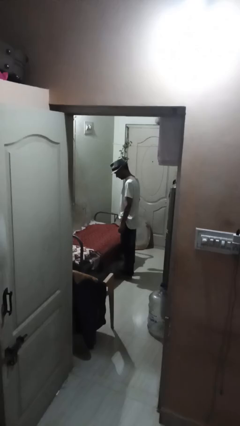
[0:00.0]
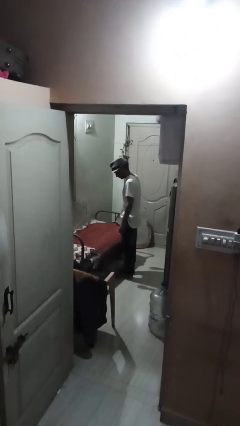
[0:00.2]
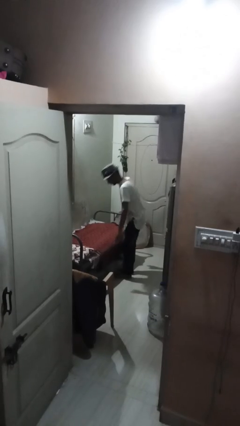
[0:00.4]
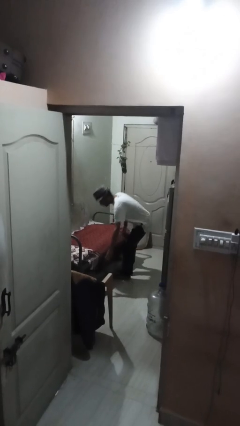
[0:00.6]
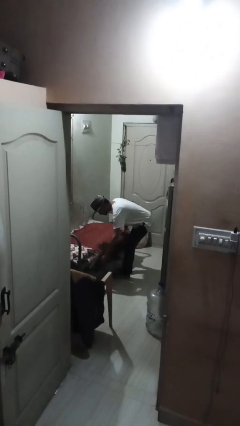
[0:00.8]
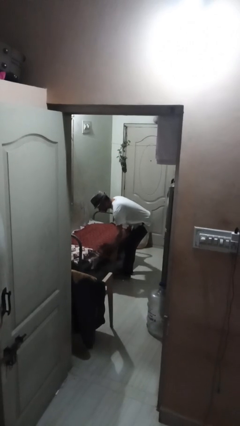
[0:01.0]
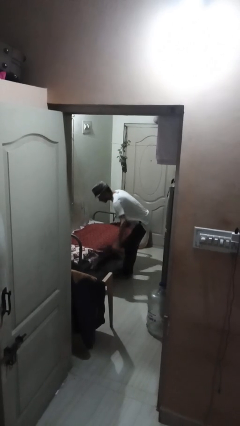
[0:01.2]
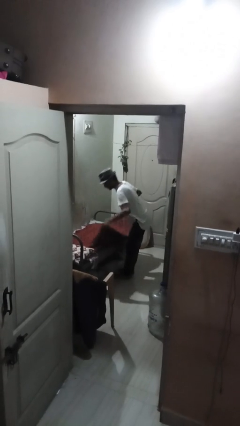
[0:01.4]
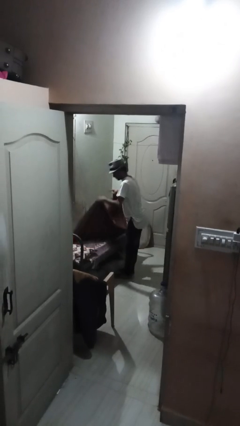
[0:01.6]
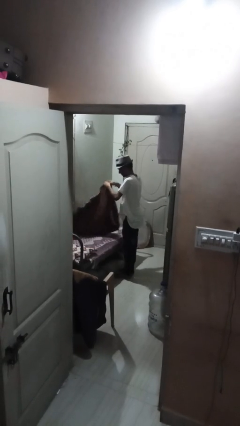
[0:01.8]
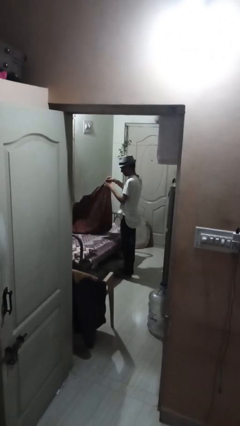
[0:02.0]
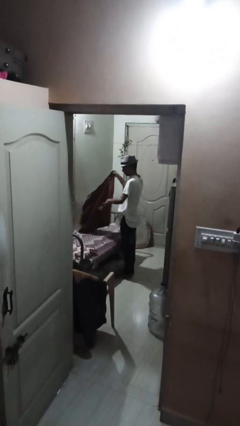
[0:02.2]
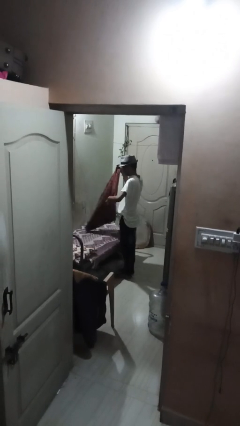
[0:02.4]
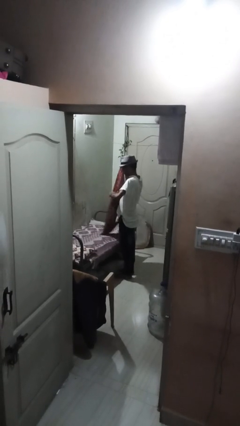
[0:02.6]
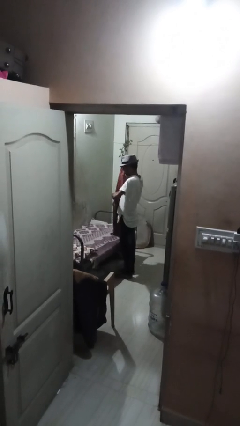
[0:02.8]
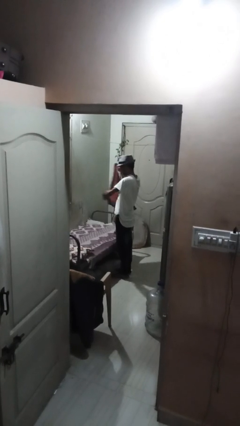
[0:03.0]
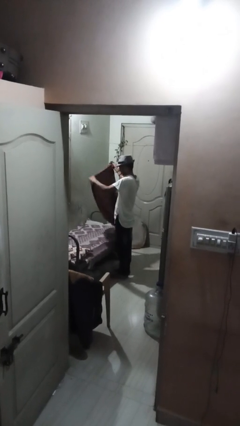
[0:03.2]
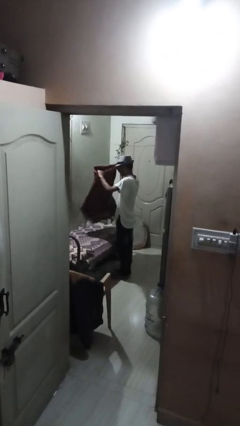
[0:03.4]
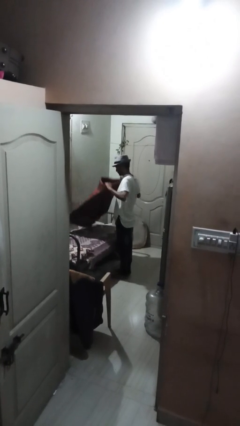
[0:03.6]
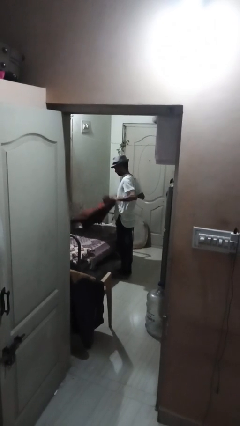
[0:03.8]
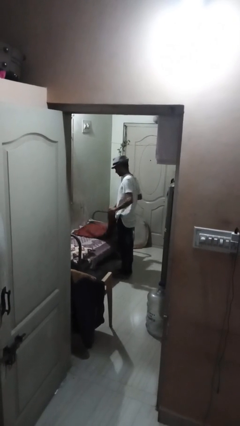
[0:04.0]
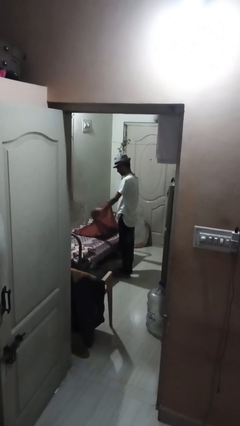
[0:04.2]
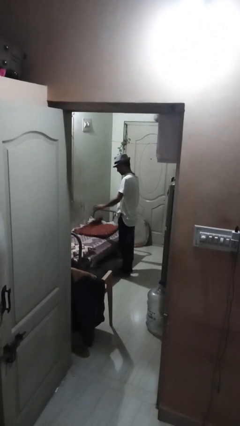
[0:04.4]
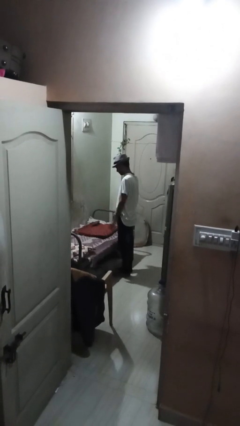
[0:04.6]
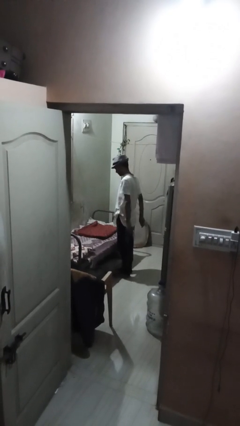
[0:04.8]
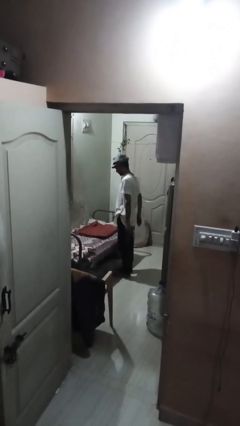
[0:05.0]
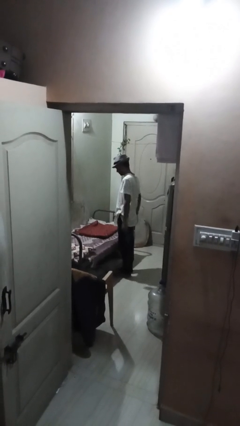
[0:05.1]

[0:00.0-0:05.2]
person folds blanket

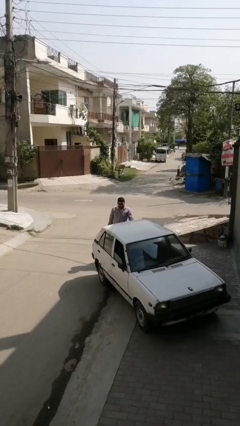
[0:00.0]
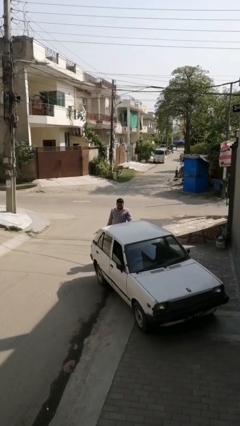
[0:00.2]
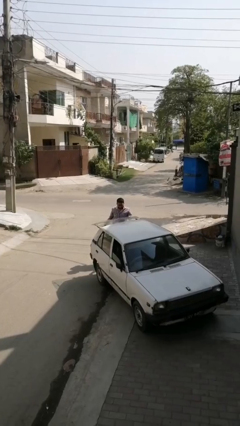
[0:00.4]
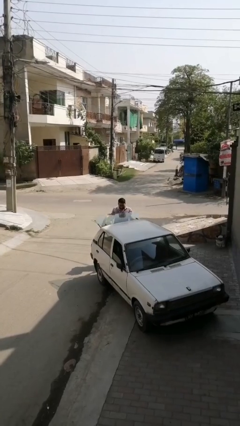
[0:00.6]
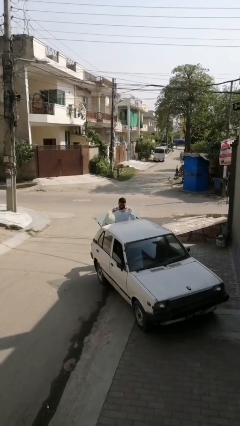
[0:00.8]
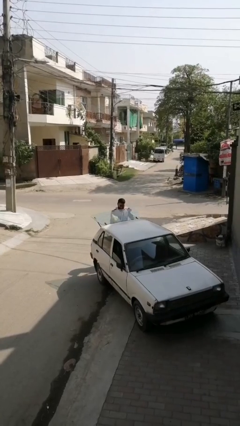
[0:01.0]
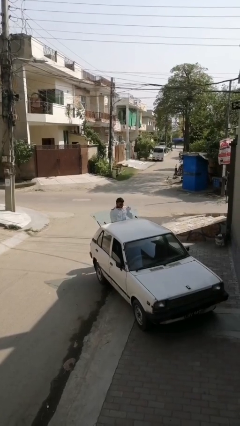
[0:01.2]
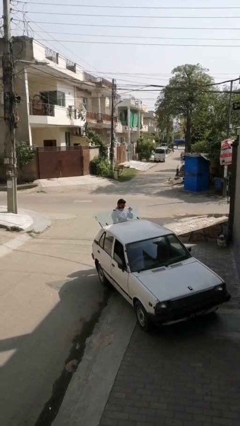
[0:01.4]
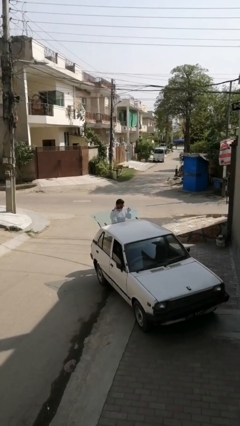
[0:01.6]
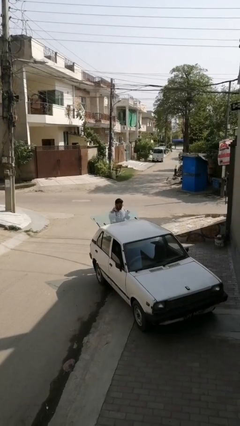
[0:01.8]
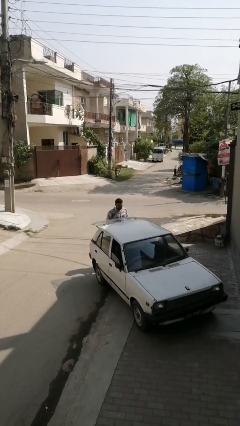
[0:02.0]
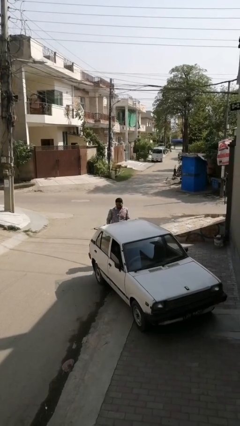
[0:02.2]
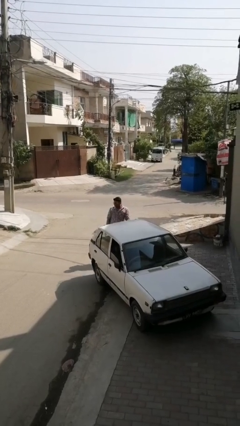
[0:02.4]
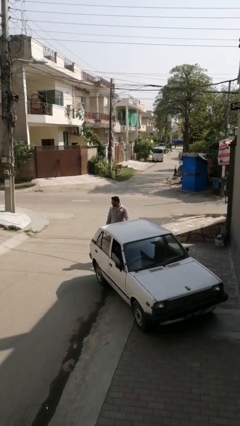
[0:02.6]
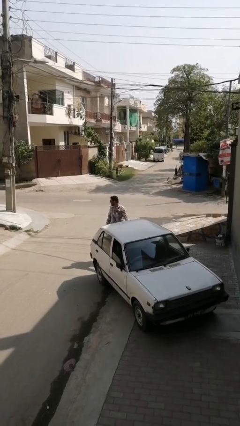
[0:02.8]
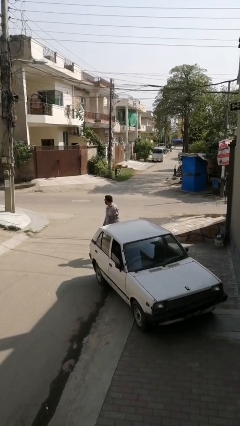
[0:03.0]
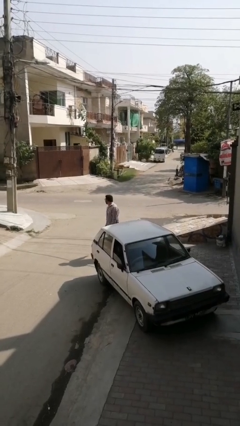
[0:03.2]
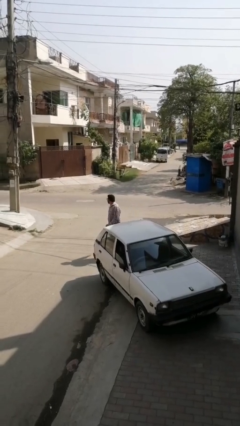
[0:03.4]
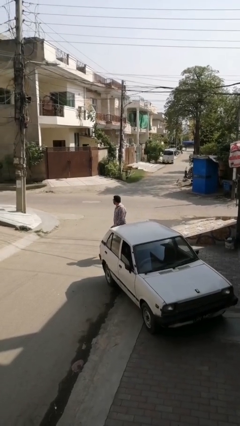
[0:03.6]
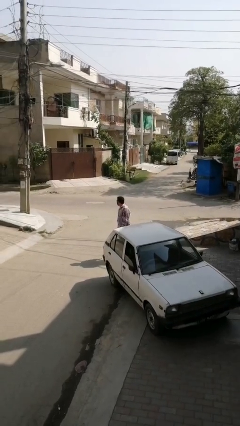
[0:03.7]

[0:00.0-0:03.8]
person loads car

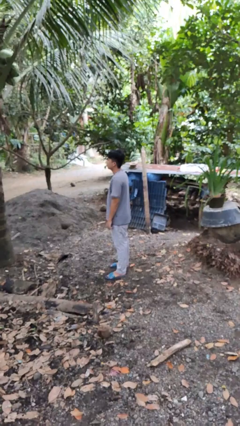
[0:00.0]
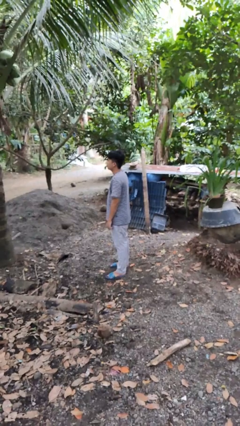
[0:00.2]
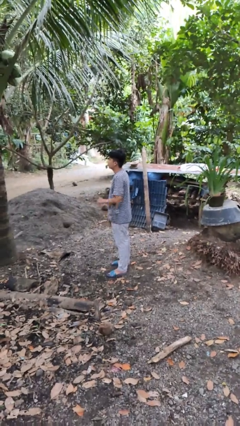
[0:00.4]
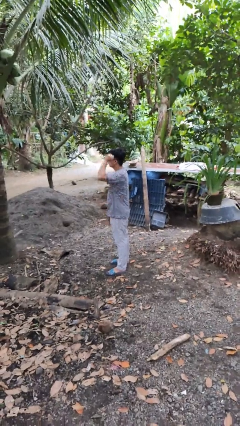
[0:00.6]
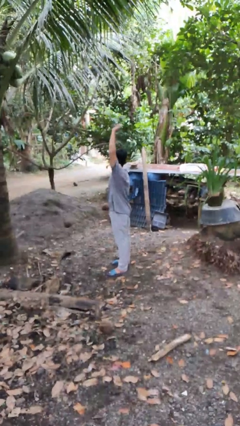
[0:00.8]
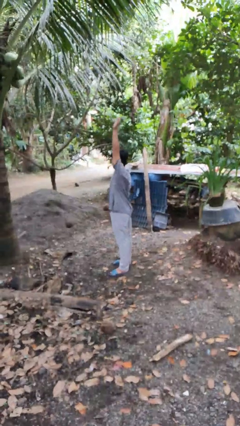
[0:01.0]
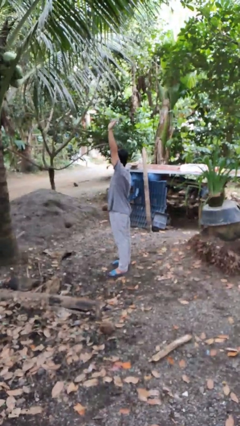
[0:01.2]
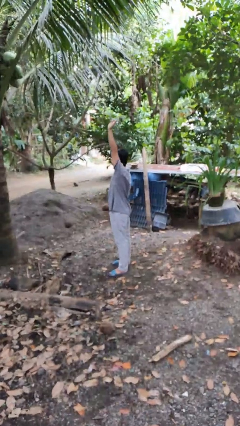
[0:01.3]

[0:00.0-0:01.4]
person gestures raise hand

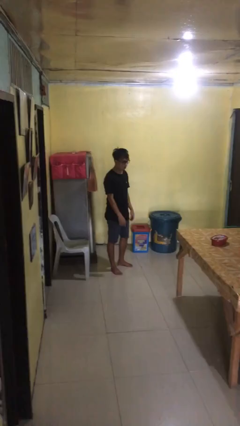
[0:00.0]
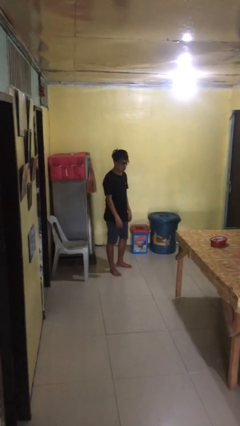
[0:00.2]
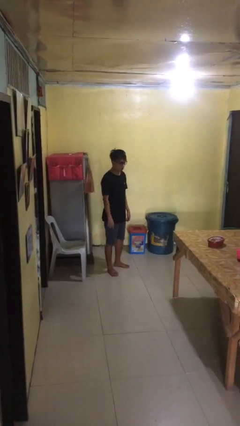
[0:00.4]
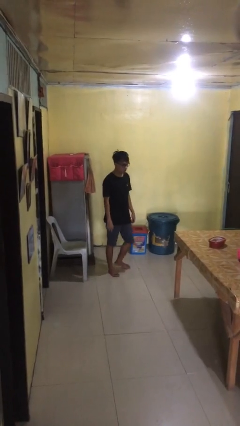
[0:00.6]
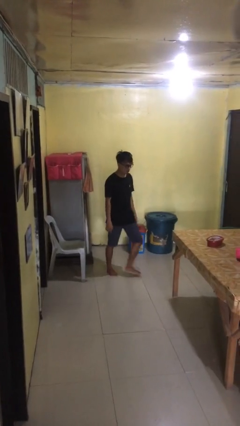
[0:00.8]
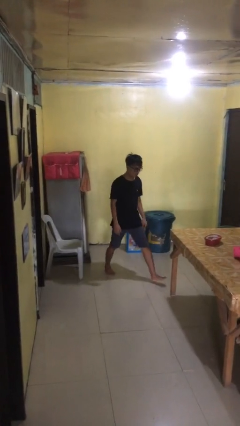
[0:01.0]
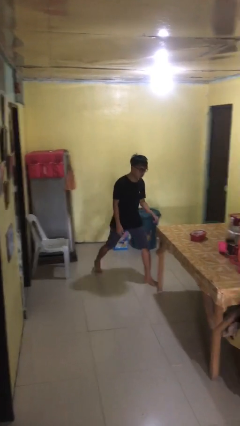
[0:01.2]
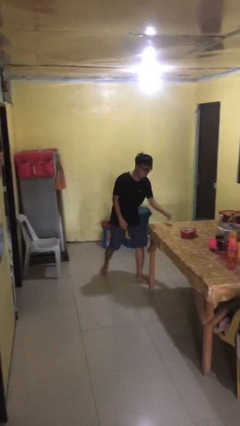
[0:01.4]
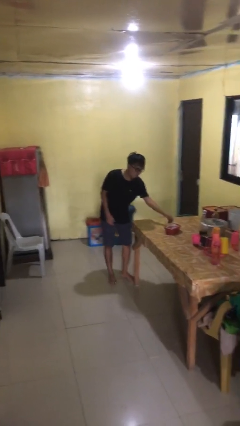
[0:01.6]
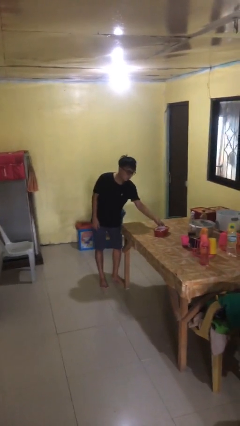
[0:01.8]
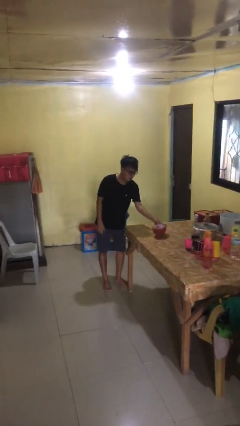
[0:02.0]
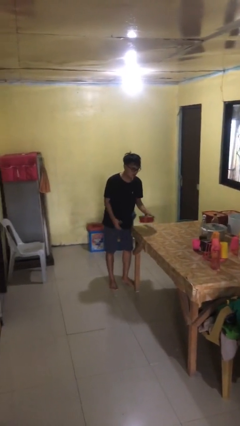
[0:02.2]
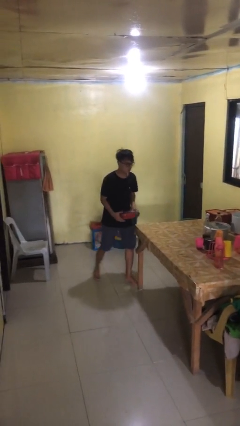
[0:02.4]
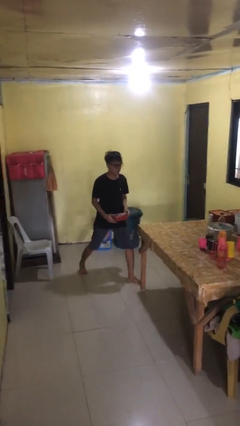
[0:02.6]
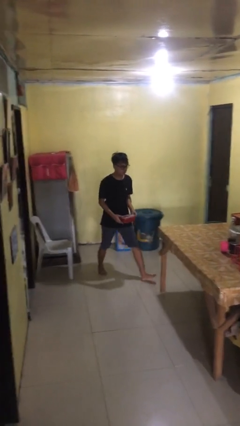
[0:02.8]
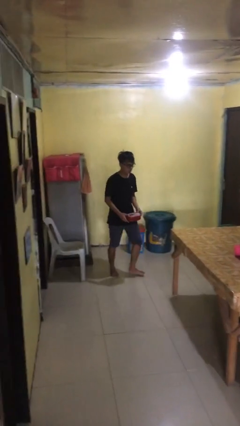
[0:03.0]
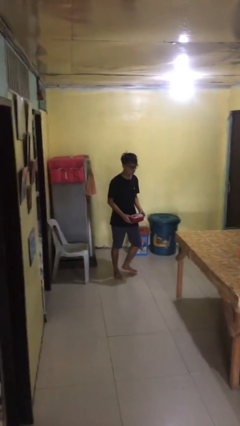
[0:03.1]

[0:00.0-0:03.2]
person picks up object from table

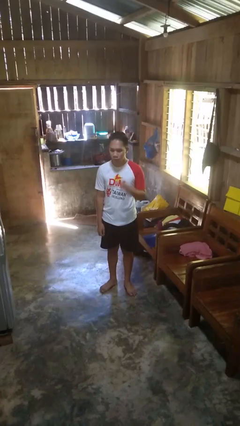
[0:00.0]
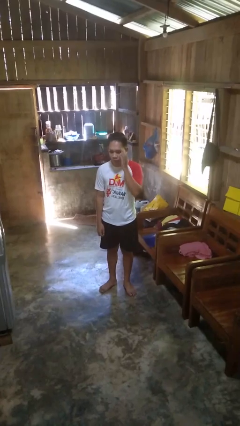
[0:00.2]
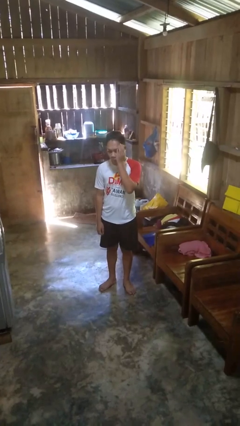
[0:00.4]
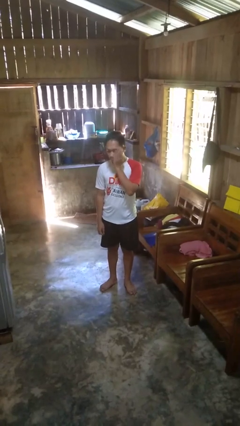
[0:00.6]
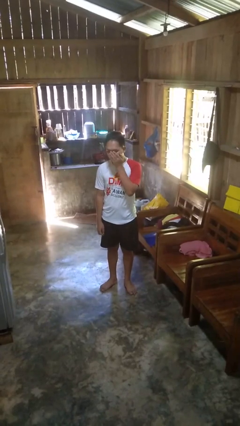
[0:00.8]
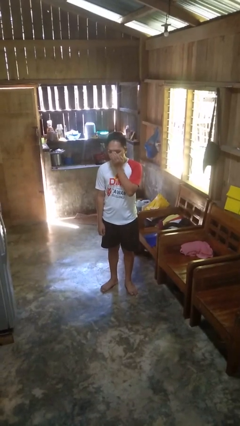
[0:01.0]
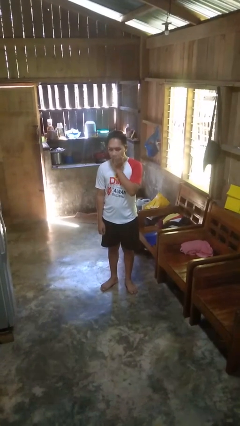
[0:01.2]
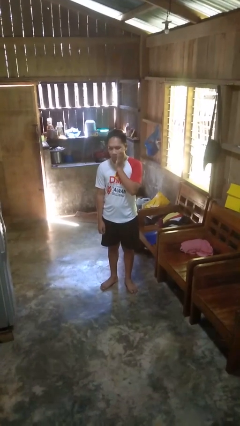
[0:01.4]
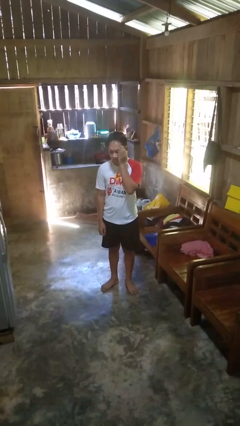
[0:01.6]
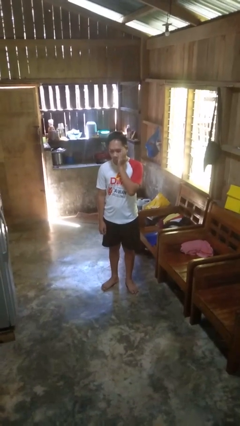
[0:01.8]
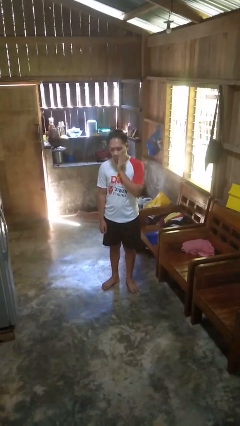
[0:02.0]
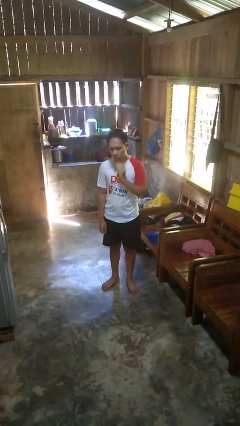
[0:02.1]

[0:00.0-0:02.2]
person scratches face

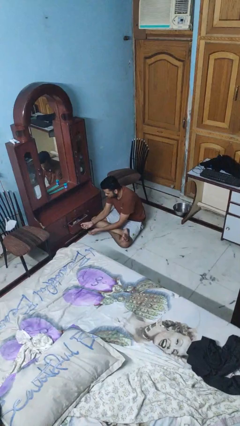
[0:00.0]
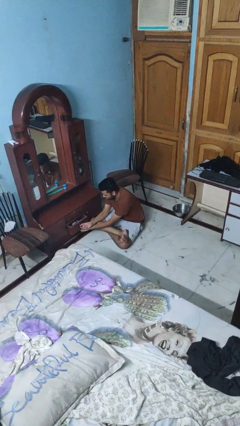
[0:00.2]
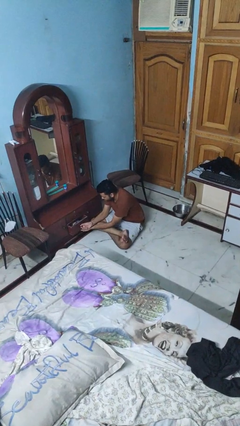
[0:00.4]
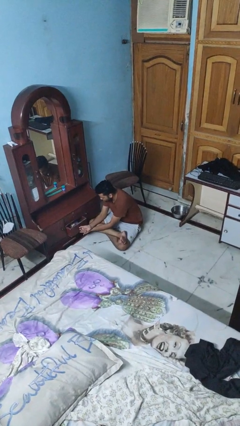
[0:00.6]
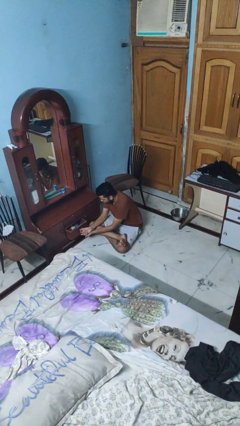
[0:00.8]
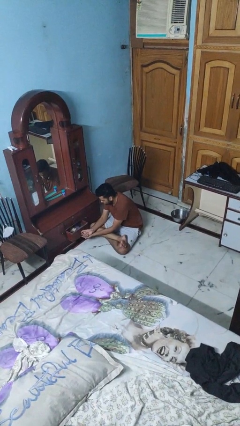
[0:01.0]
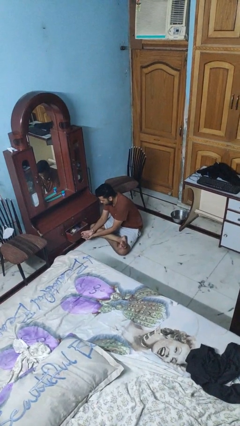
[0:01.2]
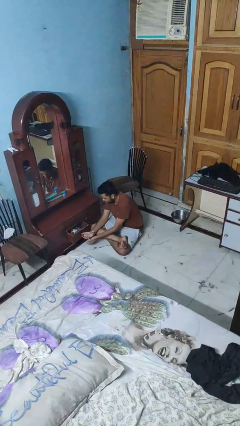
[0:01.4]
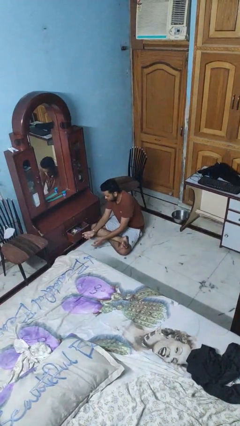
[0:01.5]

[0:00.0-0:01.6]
person opens dresser drawer
